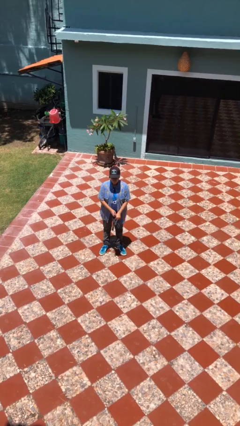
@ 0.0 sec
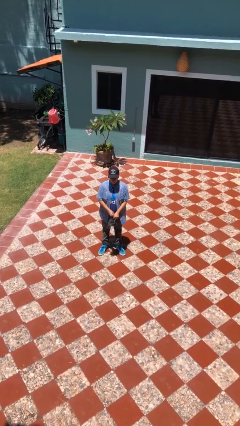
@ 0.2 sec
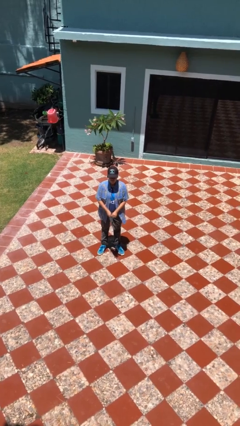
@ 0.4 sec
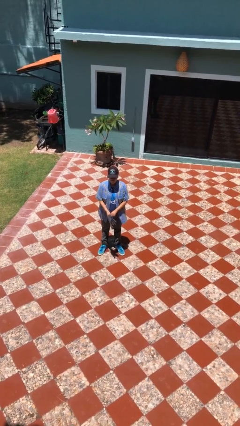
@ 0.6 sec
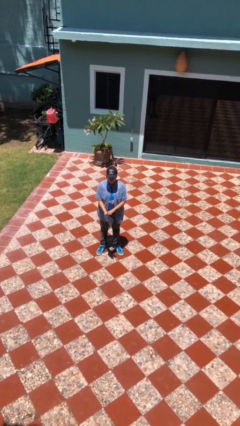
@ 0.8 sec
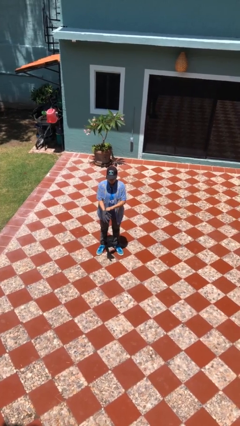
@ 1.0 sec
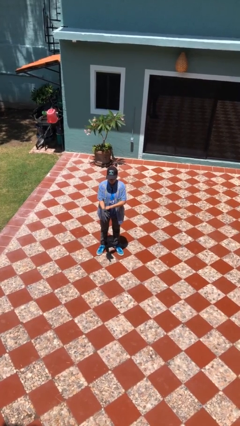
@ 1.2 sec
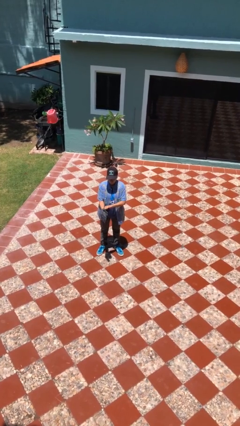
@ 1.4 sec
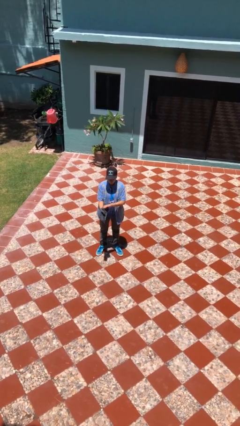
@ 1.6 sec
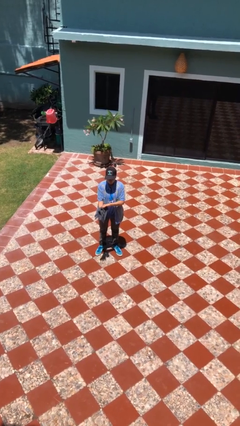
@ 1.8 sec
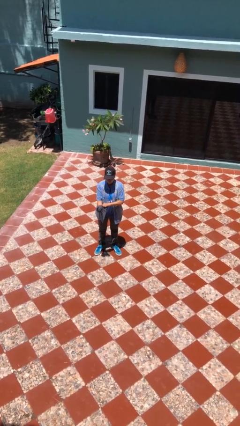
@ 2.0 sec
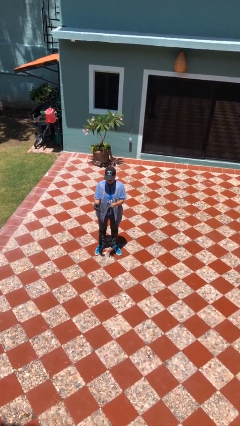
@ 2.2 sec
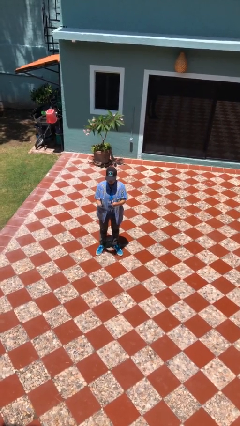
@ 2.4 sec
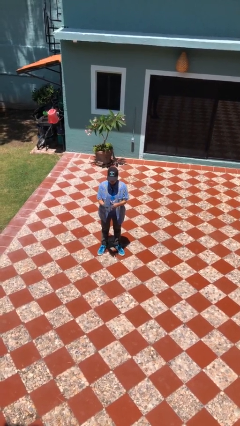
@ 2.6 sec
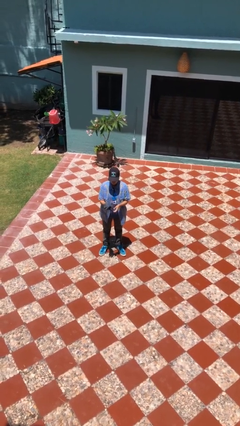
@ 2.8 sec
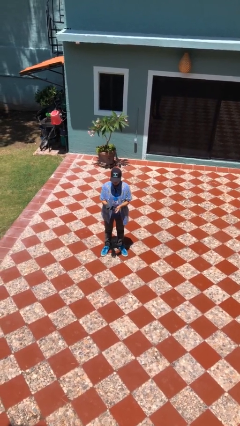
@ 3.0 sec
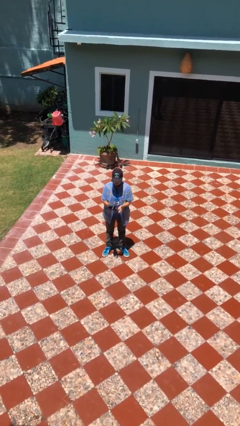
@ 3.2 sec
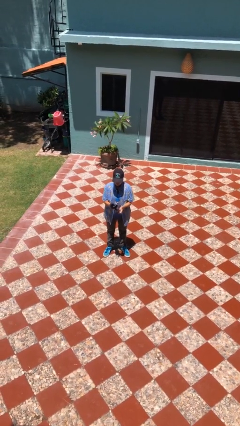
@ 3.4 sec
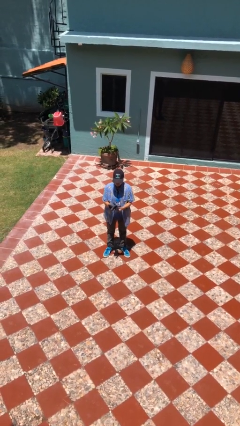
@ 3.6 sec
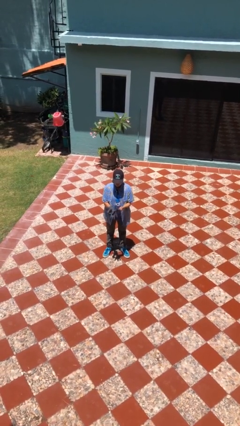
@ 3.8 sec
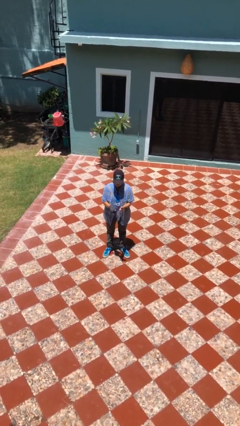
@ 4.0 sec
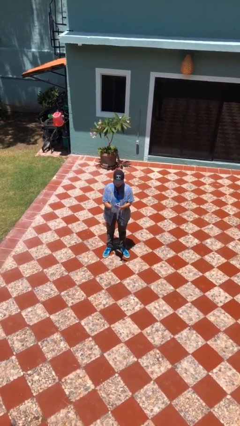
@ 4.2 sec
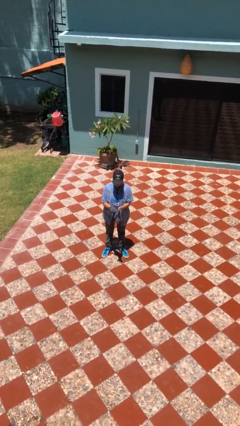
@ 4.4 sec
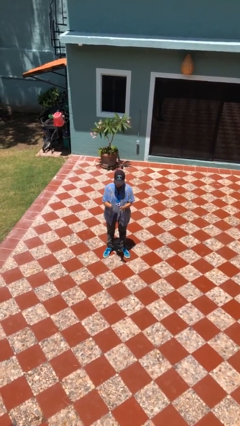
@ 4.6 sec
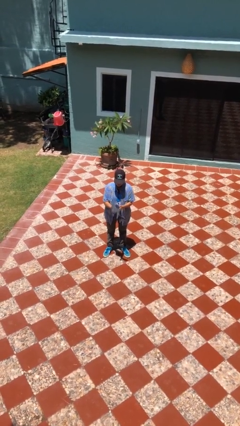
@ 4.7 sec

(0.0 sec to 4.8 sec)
person puts on gloves

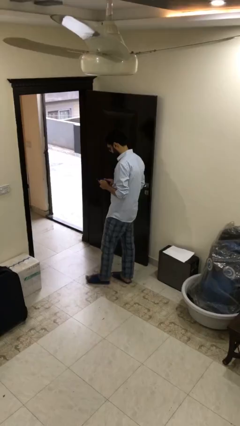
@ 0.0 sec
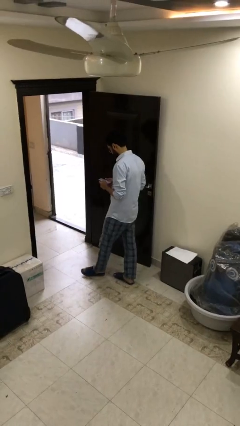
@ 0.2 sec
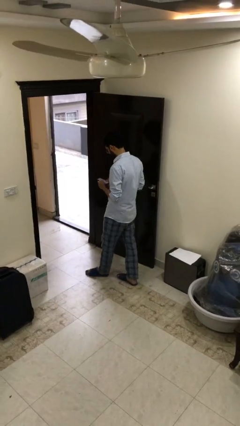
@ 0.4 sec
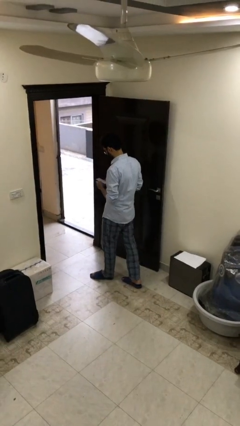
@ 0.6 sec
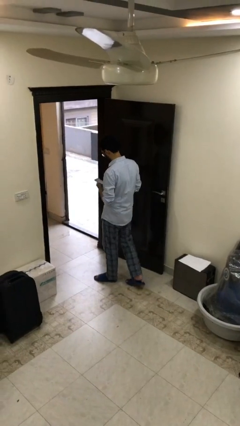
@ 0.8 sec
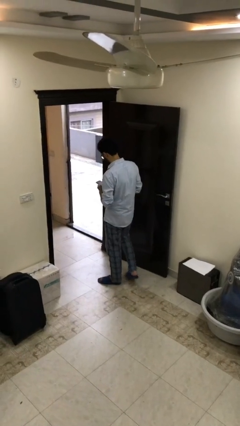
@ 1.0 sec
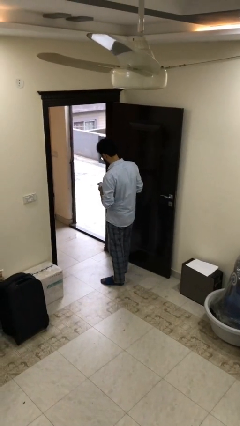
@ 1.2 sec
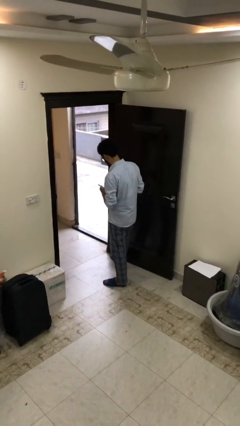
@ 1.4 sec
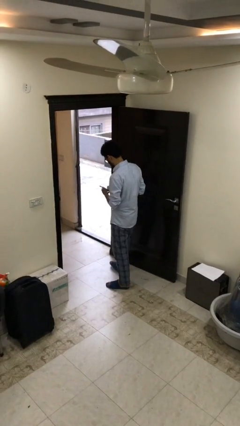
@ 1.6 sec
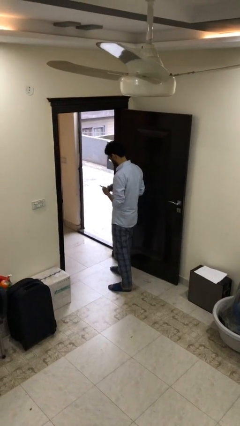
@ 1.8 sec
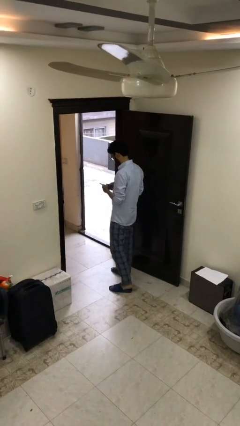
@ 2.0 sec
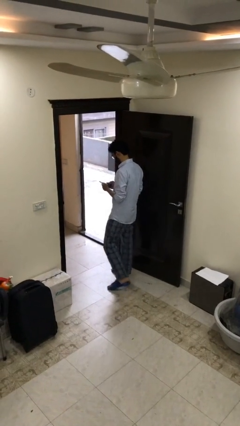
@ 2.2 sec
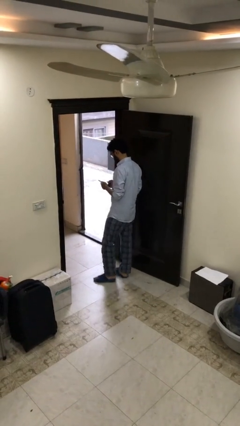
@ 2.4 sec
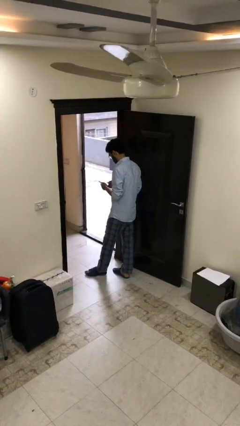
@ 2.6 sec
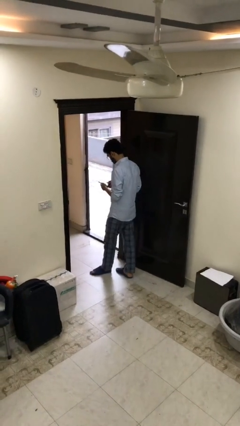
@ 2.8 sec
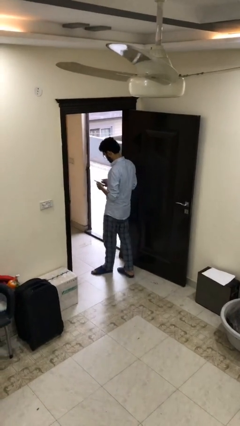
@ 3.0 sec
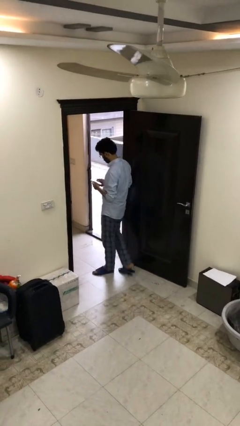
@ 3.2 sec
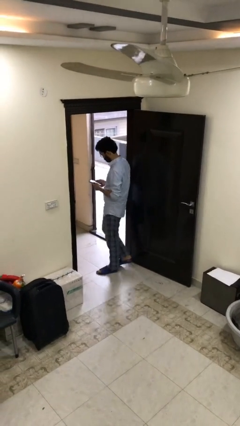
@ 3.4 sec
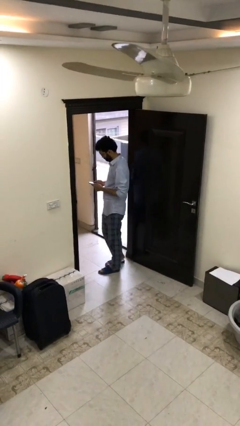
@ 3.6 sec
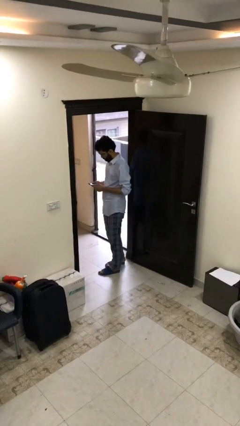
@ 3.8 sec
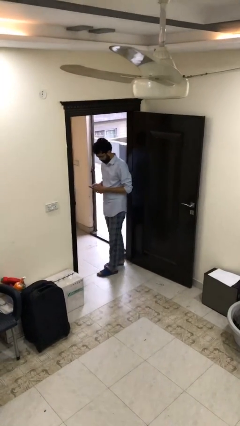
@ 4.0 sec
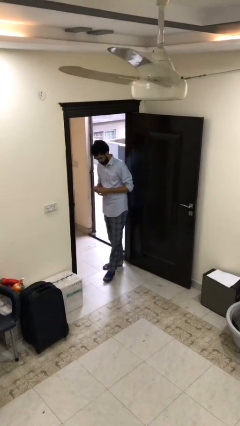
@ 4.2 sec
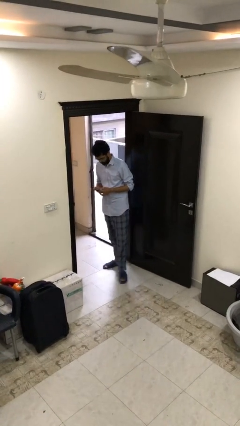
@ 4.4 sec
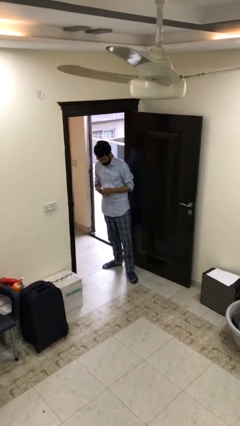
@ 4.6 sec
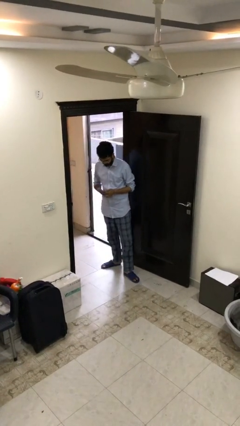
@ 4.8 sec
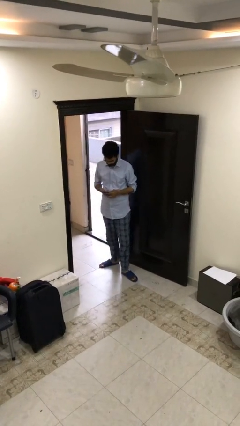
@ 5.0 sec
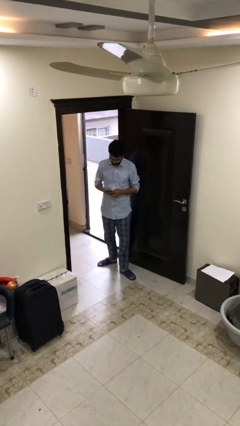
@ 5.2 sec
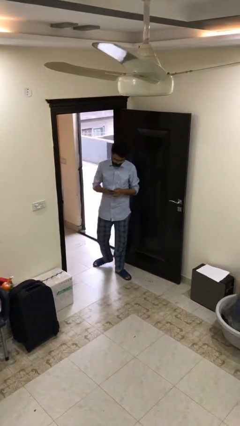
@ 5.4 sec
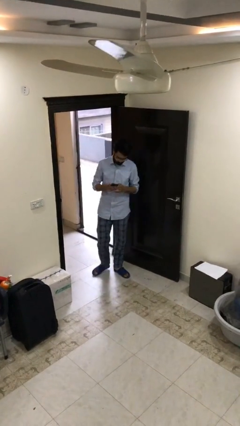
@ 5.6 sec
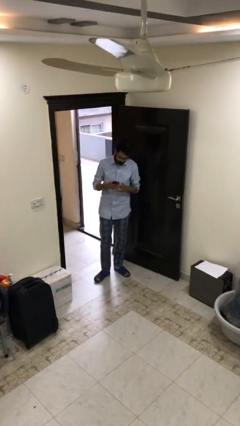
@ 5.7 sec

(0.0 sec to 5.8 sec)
person texts on phone

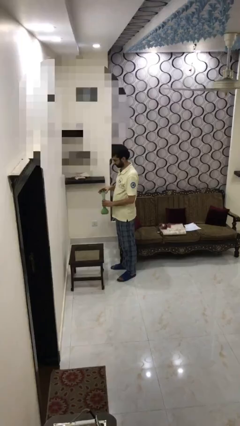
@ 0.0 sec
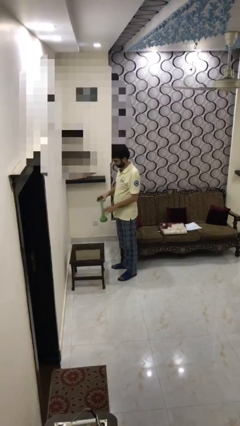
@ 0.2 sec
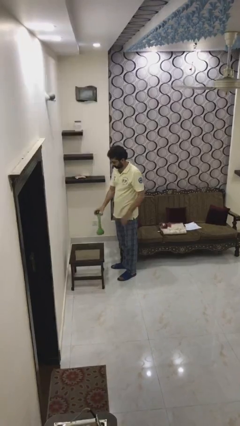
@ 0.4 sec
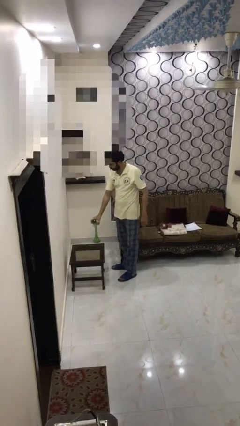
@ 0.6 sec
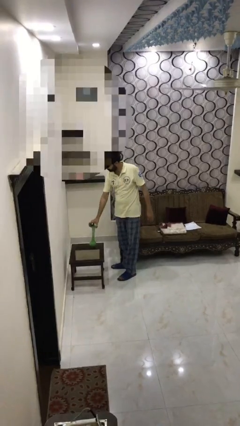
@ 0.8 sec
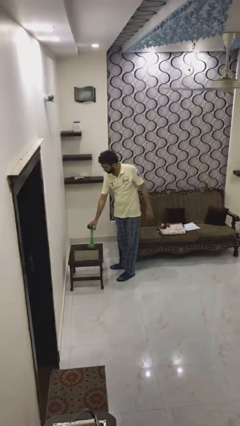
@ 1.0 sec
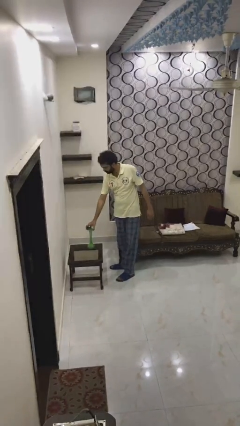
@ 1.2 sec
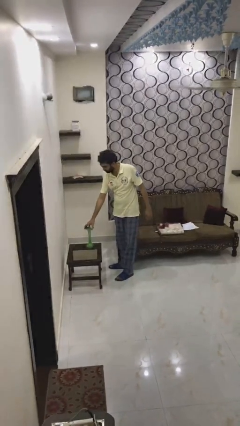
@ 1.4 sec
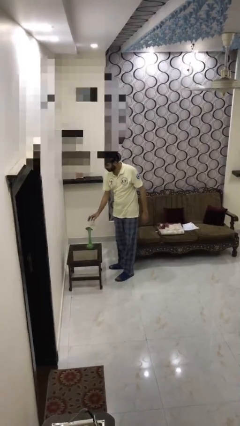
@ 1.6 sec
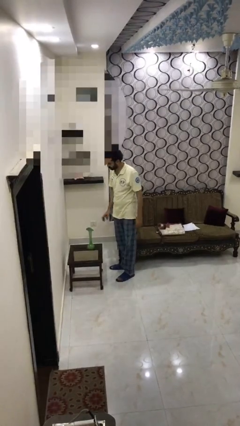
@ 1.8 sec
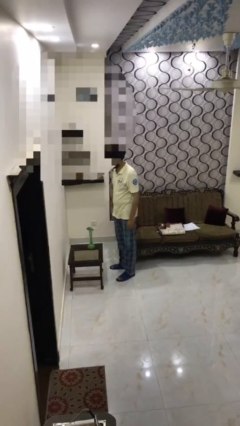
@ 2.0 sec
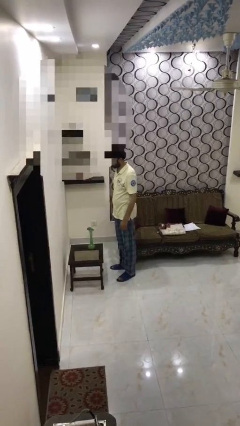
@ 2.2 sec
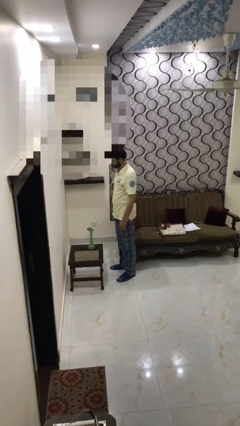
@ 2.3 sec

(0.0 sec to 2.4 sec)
person puts down object on table

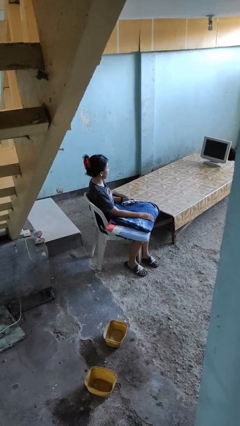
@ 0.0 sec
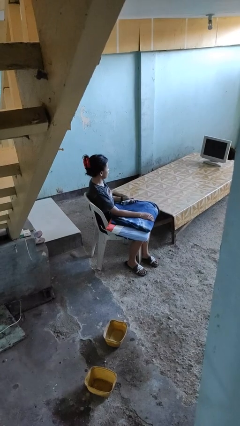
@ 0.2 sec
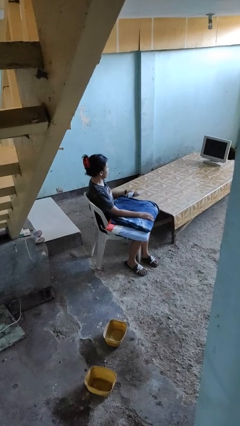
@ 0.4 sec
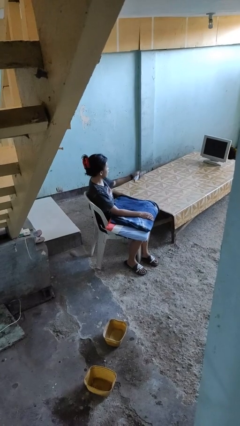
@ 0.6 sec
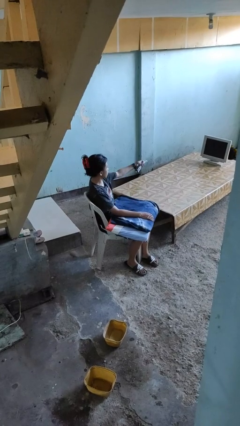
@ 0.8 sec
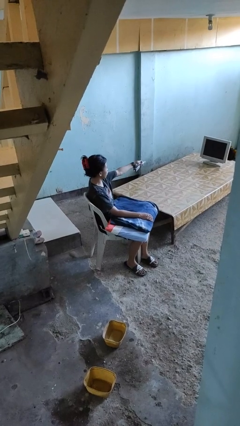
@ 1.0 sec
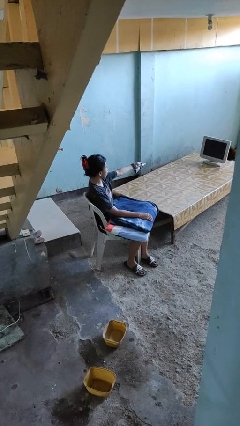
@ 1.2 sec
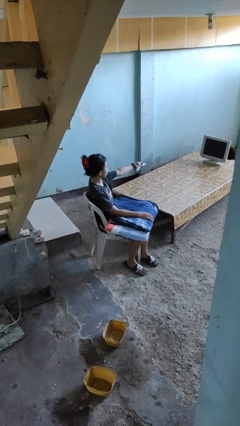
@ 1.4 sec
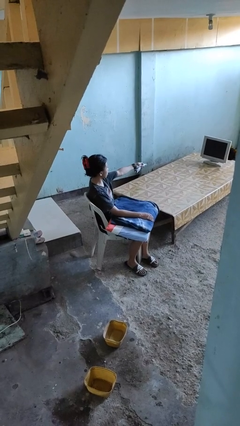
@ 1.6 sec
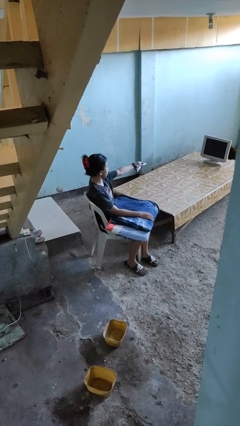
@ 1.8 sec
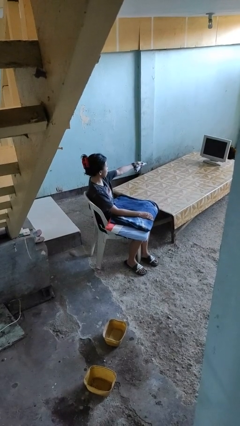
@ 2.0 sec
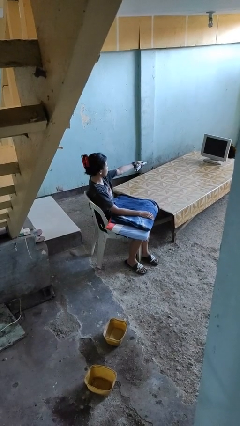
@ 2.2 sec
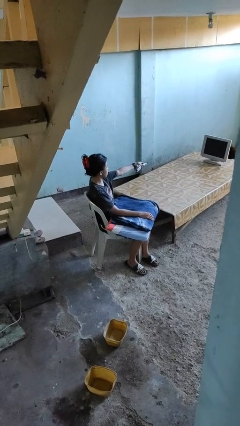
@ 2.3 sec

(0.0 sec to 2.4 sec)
person uses television remote

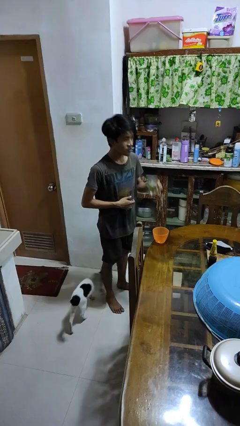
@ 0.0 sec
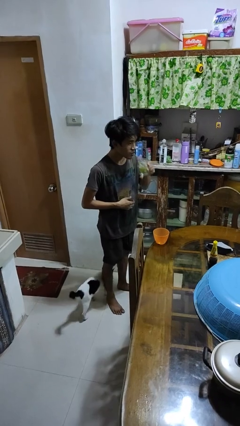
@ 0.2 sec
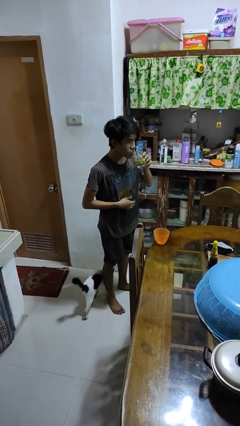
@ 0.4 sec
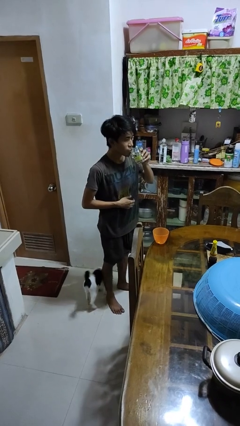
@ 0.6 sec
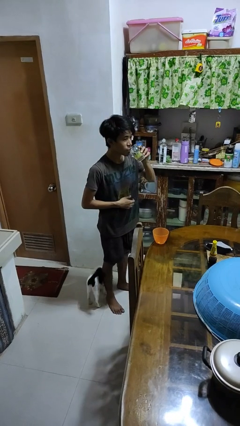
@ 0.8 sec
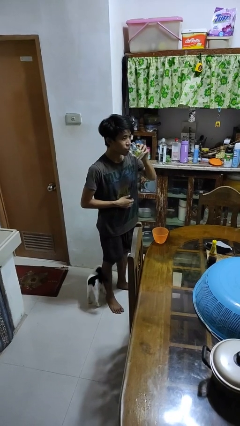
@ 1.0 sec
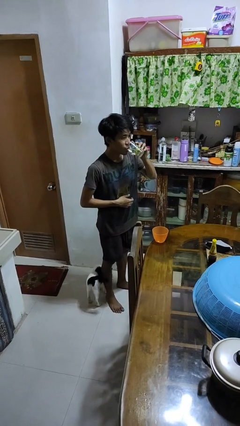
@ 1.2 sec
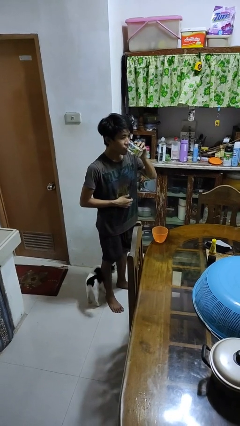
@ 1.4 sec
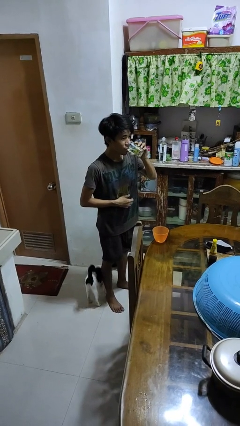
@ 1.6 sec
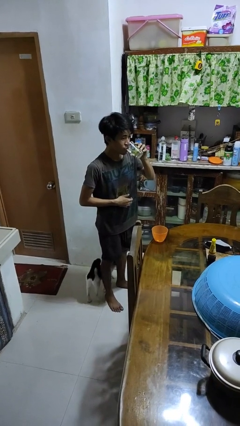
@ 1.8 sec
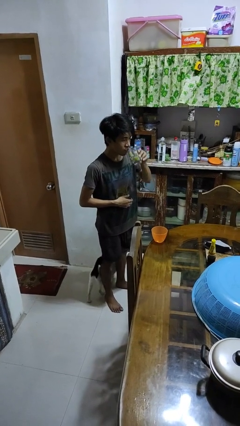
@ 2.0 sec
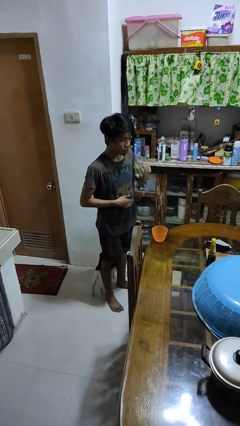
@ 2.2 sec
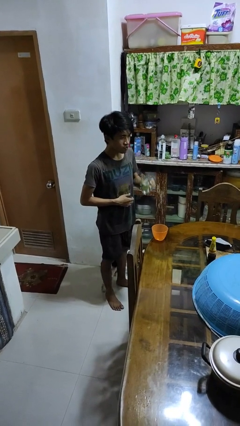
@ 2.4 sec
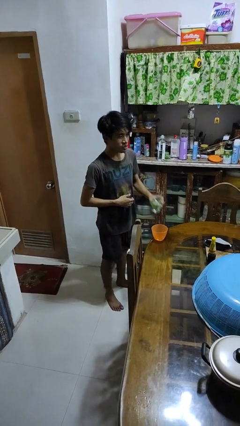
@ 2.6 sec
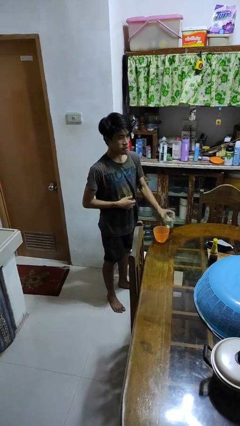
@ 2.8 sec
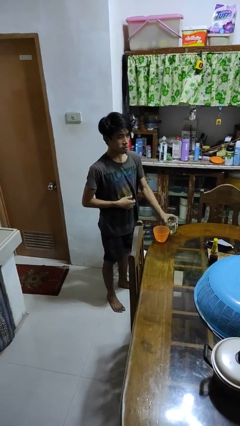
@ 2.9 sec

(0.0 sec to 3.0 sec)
person drinks from cup
